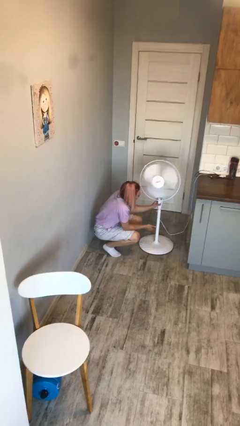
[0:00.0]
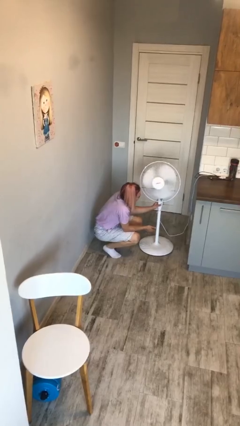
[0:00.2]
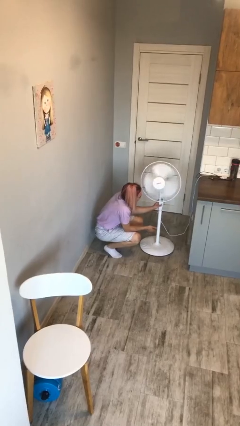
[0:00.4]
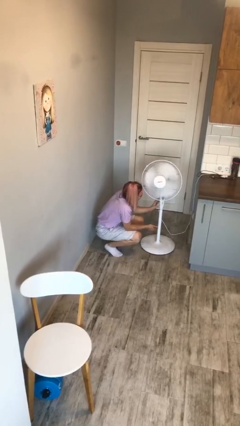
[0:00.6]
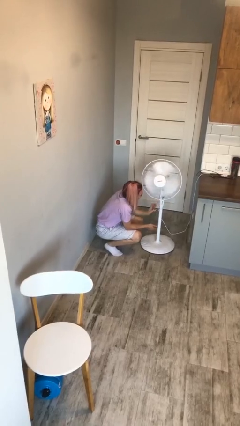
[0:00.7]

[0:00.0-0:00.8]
person turns on fan

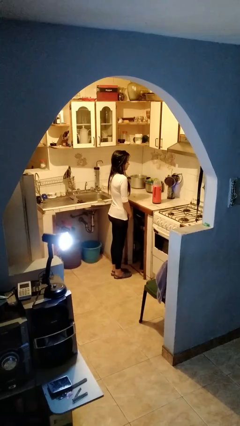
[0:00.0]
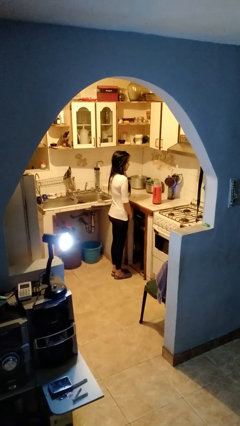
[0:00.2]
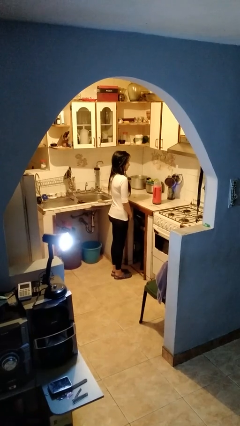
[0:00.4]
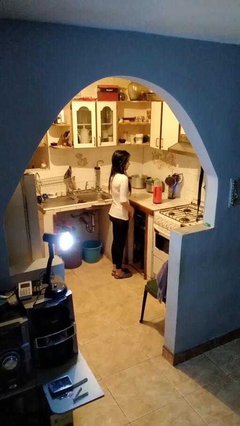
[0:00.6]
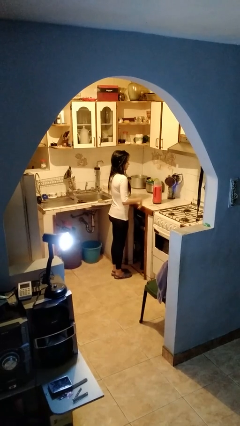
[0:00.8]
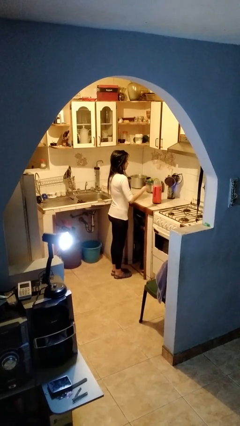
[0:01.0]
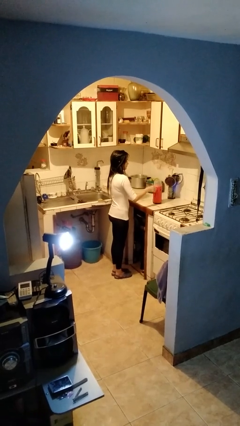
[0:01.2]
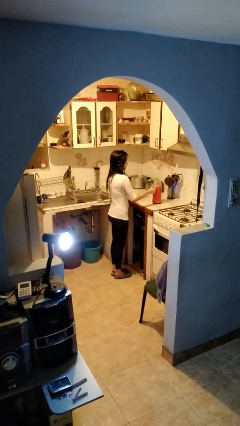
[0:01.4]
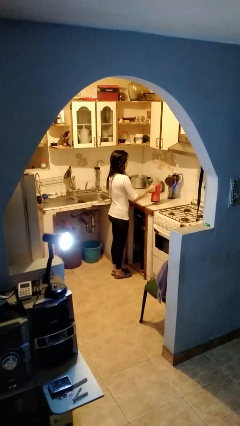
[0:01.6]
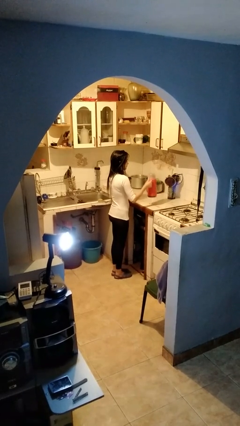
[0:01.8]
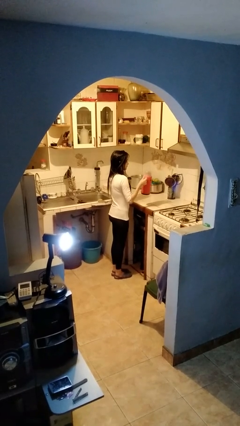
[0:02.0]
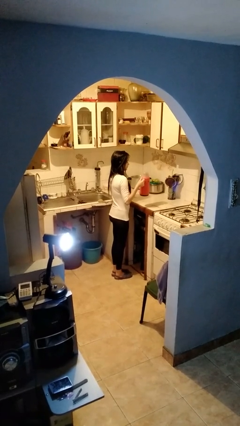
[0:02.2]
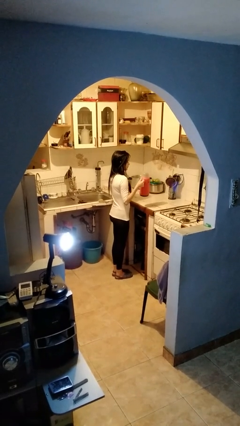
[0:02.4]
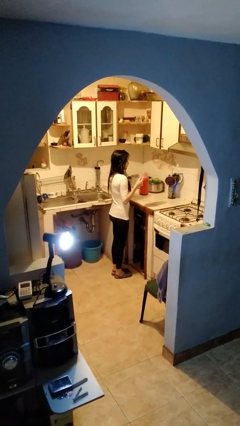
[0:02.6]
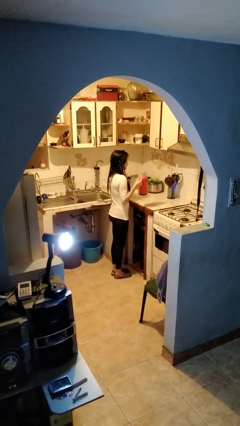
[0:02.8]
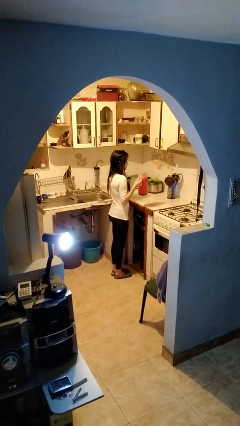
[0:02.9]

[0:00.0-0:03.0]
person picks up object from countertop

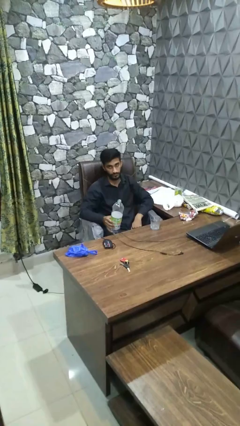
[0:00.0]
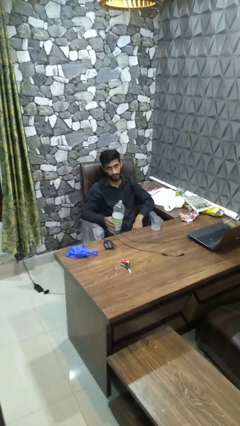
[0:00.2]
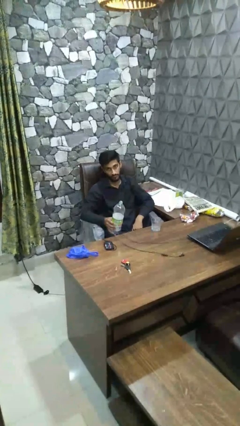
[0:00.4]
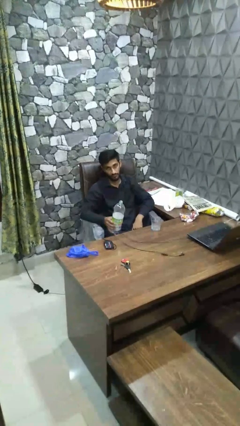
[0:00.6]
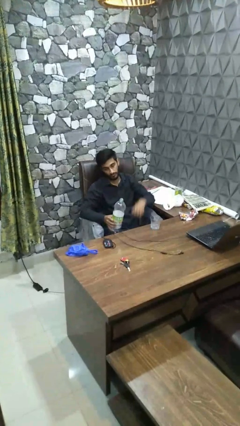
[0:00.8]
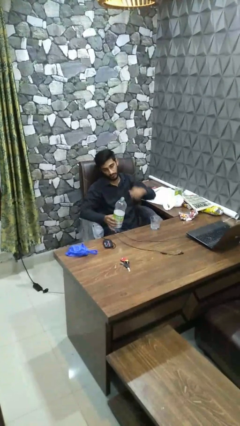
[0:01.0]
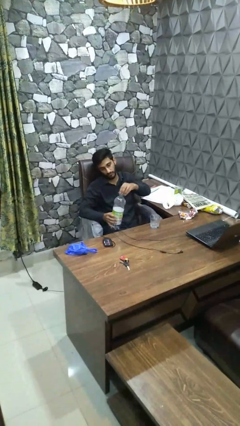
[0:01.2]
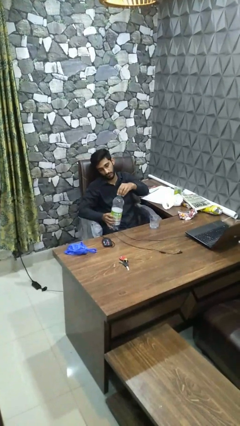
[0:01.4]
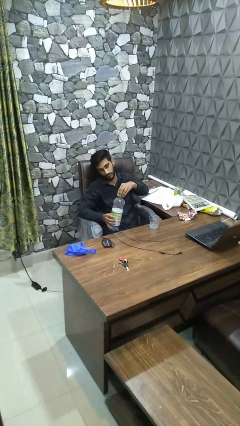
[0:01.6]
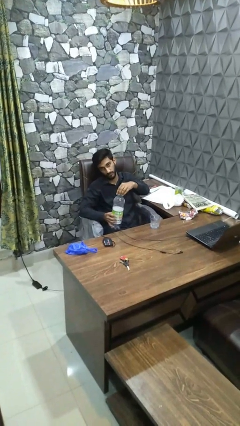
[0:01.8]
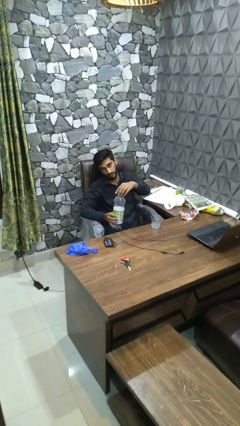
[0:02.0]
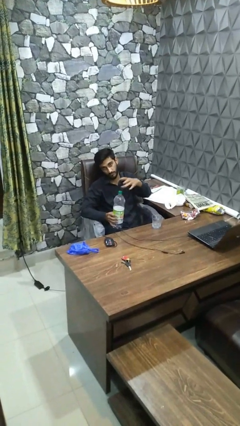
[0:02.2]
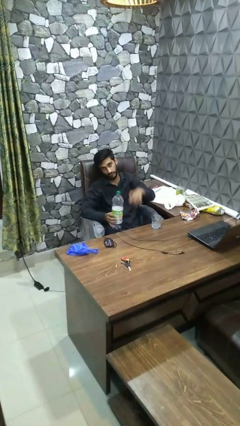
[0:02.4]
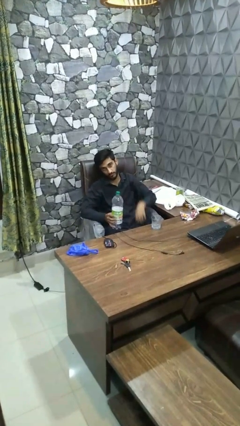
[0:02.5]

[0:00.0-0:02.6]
person screws lid to bottle

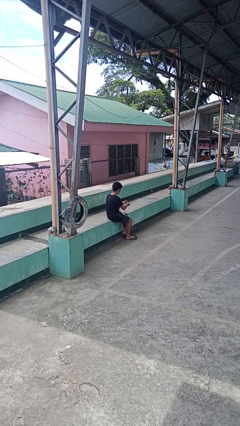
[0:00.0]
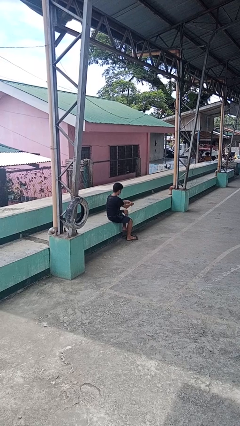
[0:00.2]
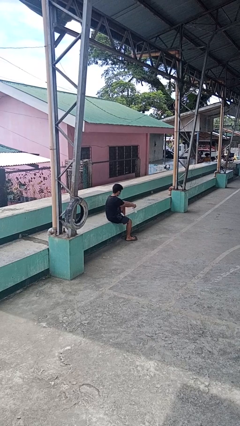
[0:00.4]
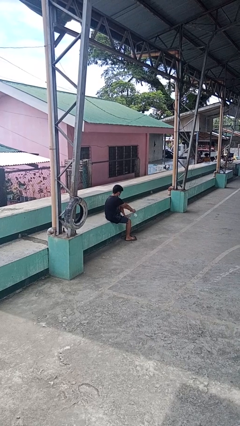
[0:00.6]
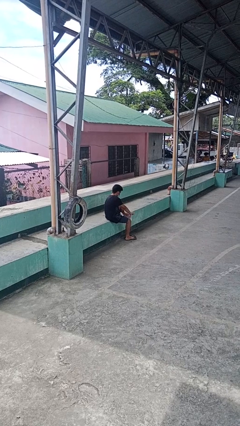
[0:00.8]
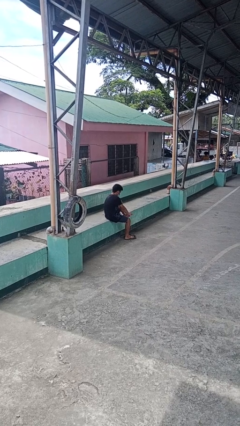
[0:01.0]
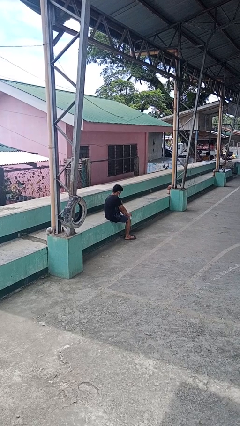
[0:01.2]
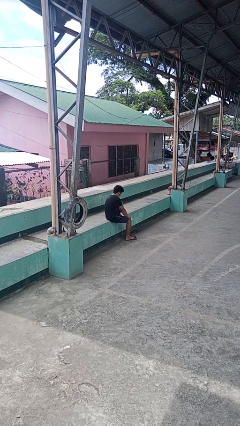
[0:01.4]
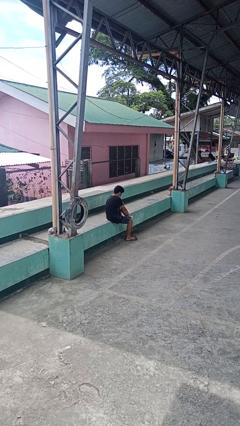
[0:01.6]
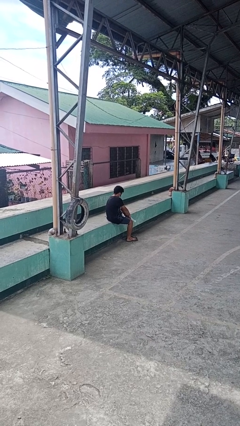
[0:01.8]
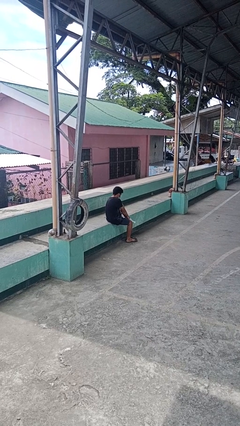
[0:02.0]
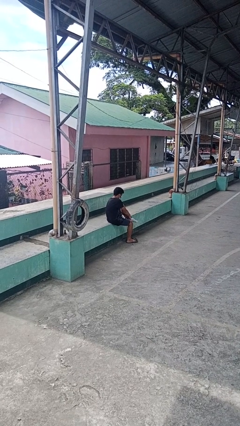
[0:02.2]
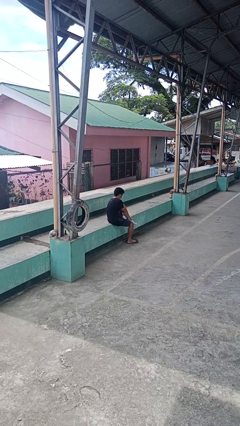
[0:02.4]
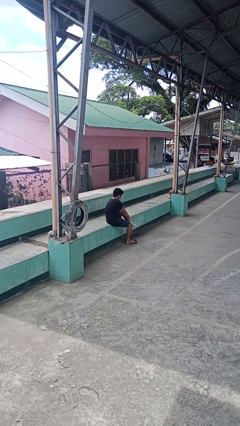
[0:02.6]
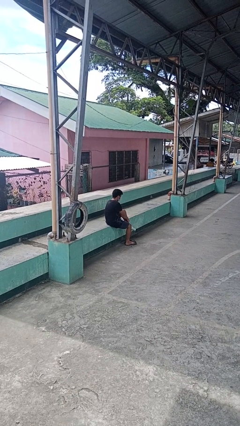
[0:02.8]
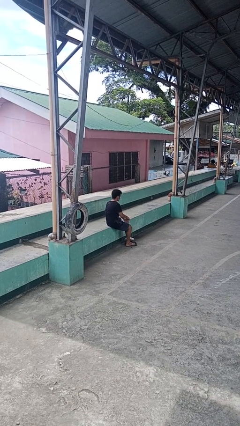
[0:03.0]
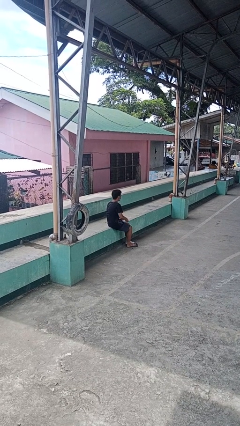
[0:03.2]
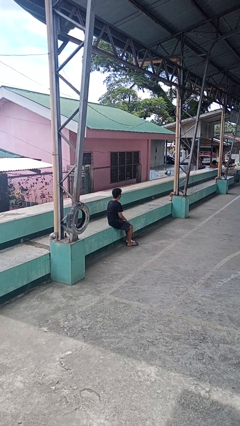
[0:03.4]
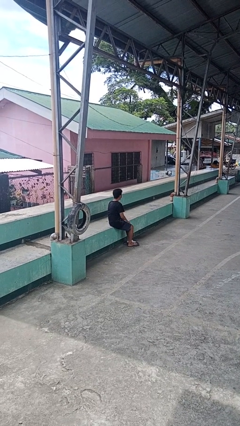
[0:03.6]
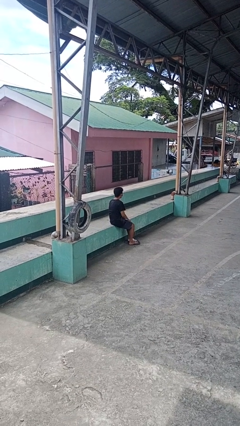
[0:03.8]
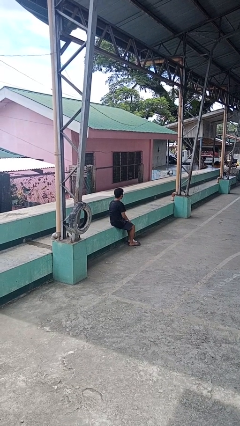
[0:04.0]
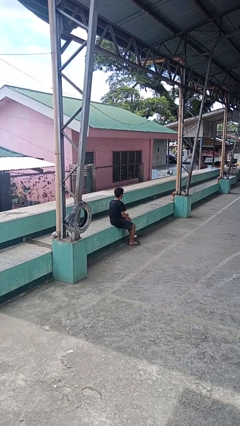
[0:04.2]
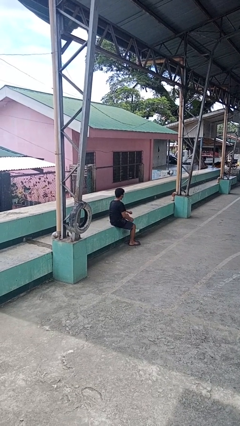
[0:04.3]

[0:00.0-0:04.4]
person puts on socks

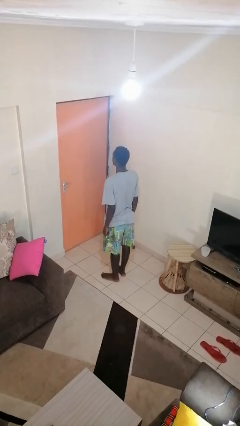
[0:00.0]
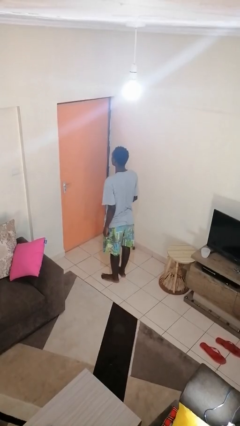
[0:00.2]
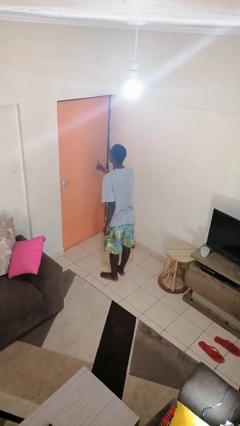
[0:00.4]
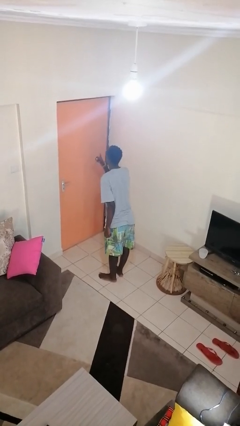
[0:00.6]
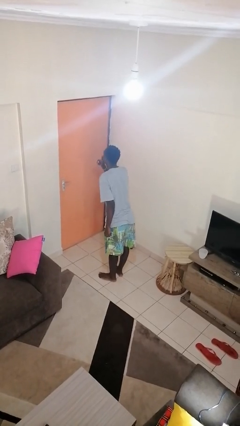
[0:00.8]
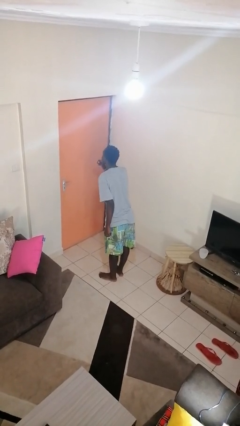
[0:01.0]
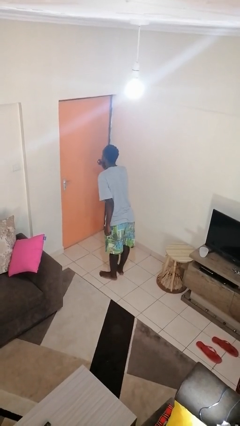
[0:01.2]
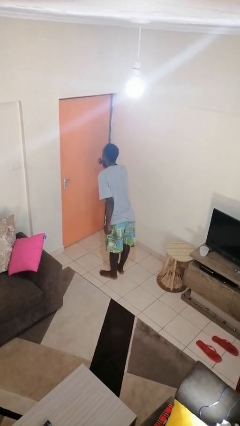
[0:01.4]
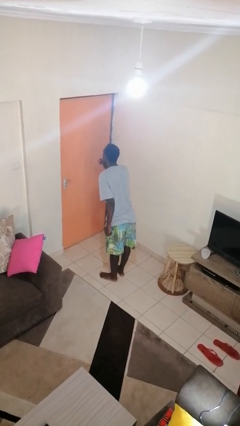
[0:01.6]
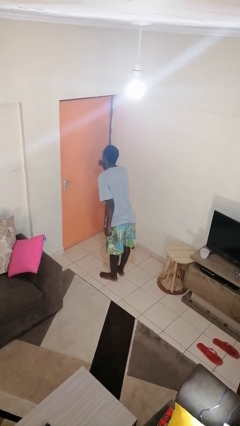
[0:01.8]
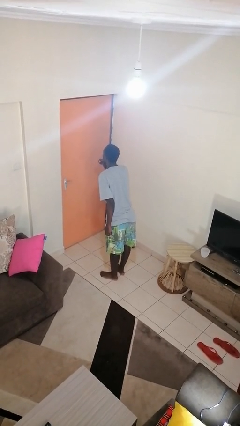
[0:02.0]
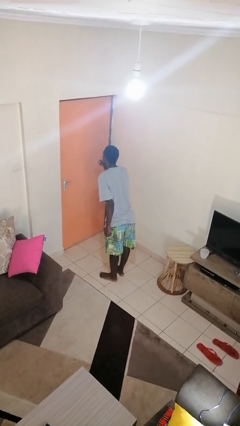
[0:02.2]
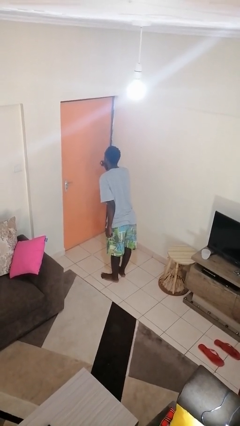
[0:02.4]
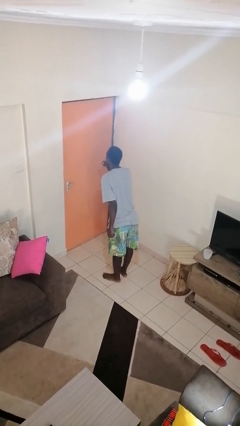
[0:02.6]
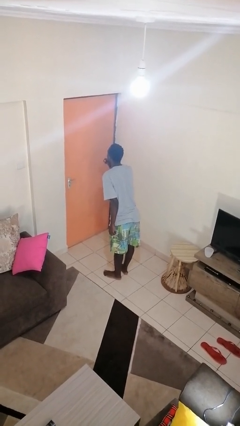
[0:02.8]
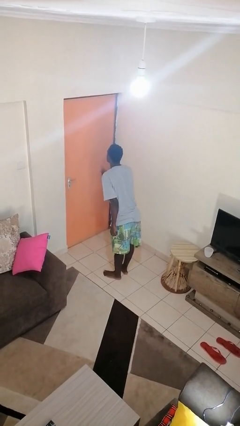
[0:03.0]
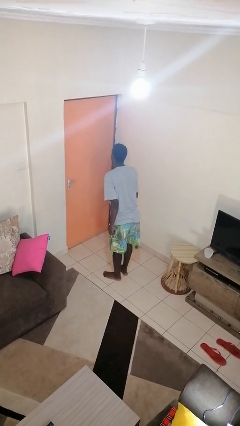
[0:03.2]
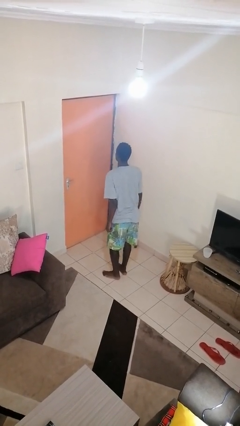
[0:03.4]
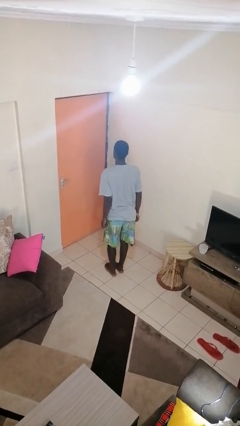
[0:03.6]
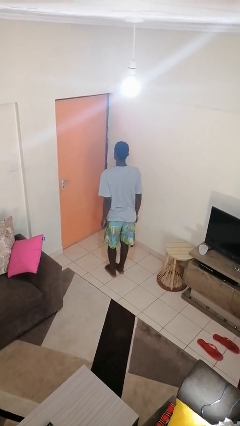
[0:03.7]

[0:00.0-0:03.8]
person gestures be quiet

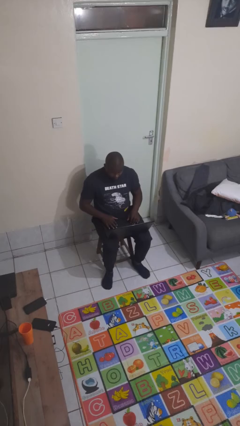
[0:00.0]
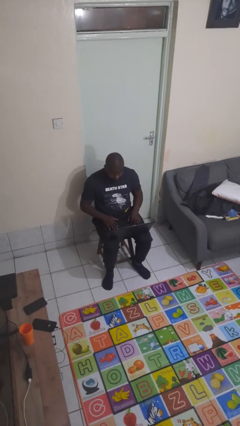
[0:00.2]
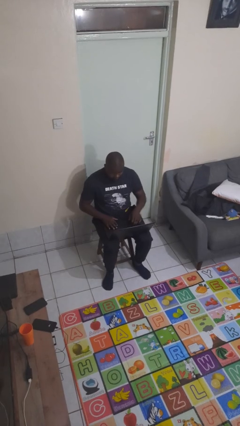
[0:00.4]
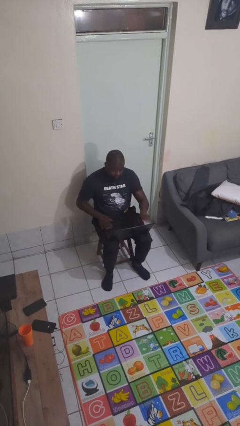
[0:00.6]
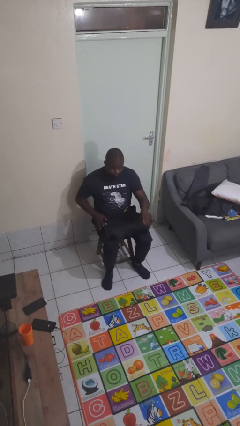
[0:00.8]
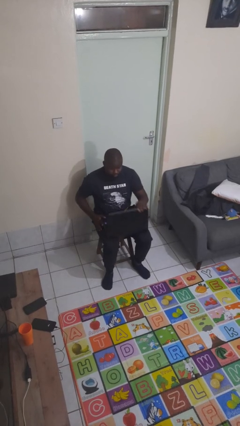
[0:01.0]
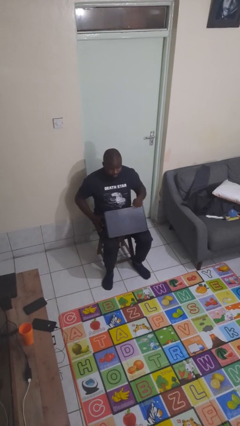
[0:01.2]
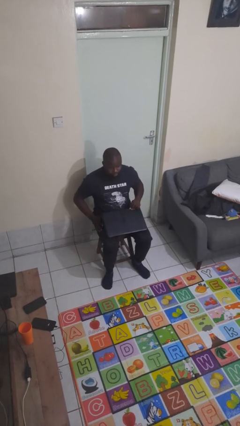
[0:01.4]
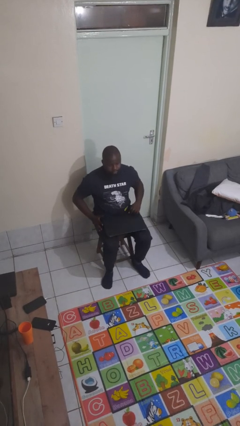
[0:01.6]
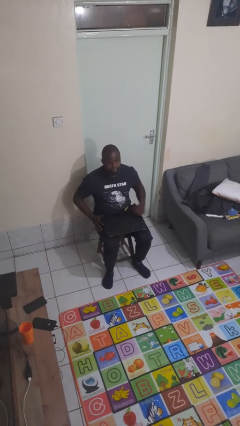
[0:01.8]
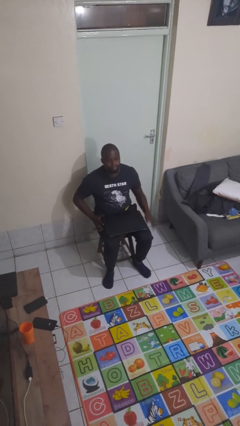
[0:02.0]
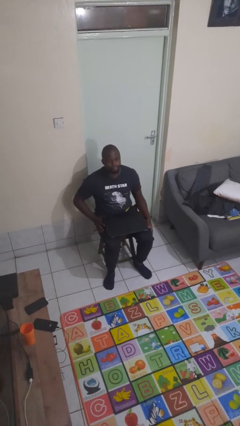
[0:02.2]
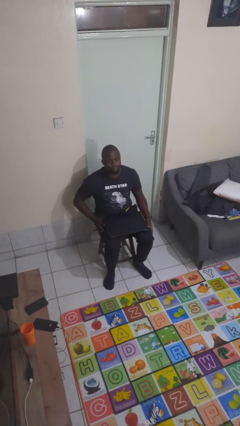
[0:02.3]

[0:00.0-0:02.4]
person closes laptop

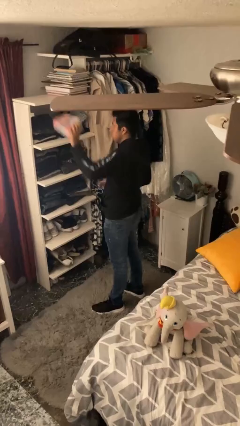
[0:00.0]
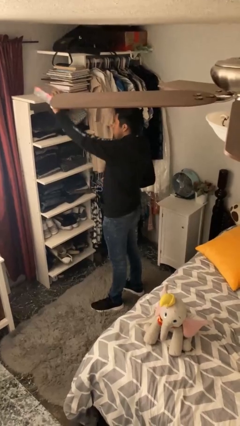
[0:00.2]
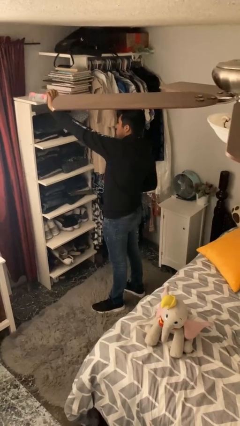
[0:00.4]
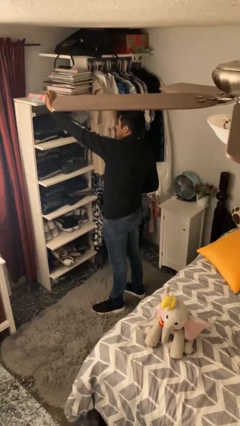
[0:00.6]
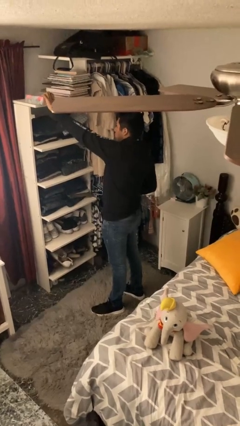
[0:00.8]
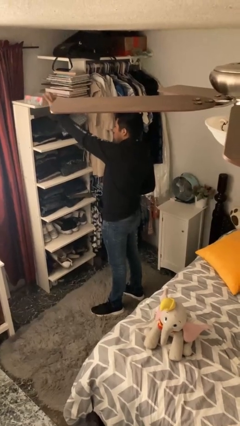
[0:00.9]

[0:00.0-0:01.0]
person puts down object on shelf
